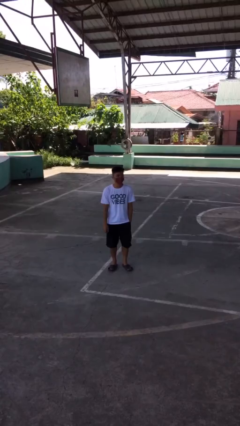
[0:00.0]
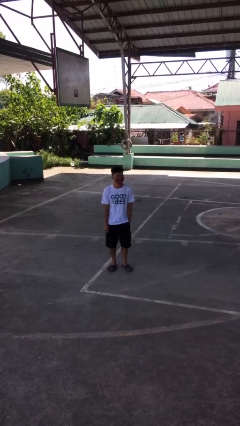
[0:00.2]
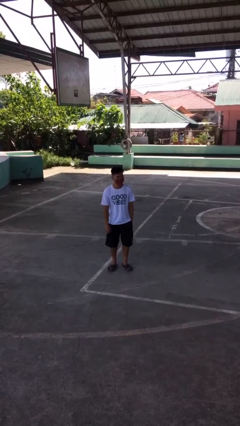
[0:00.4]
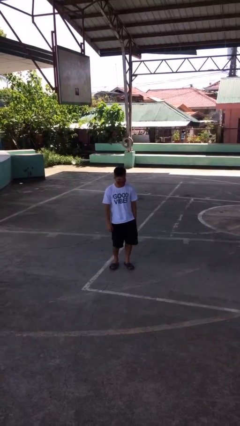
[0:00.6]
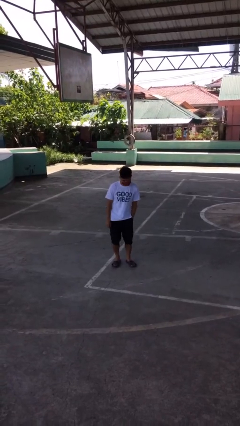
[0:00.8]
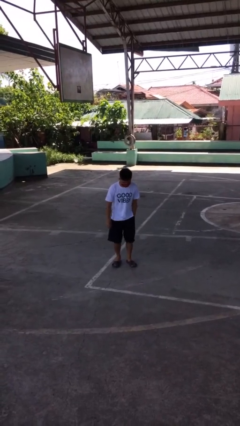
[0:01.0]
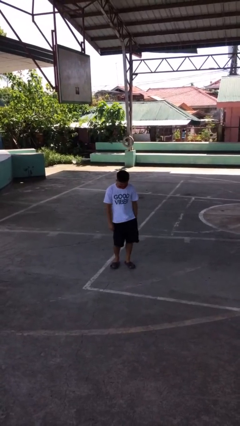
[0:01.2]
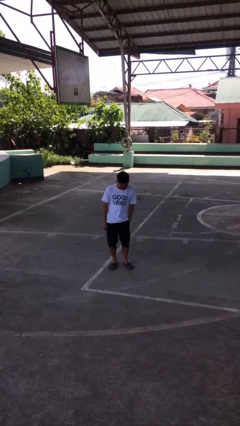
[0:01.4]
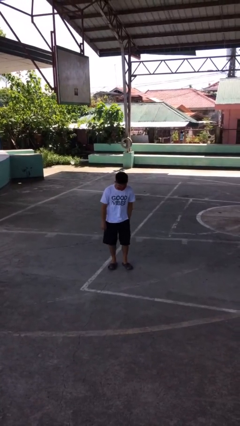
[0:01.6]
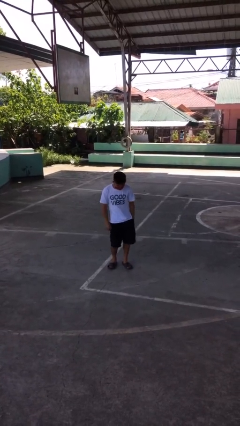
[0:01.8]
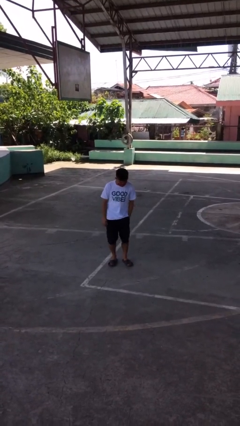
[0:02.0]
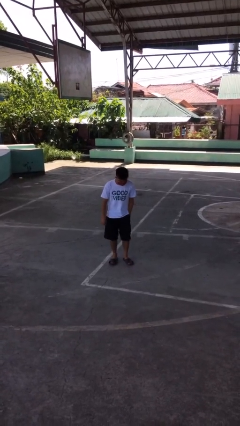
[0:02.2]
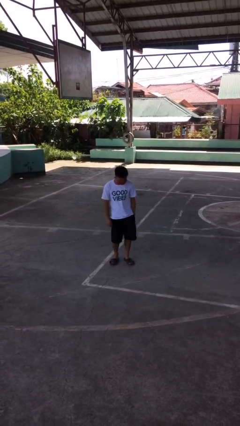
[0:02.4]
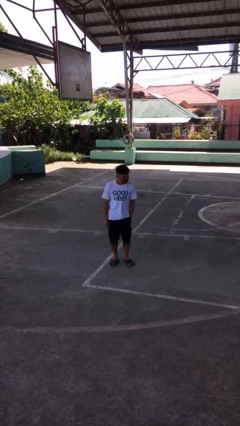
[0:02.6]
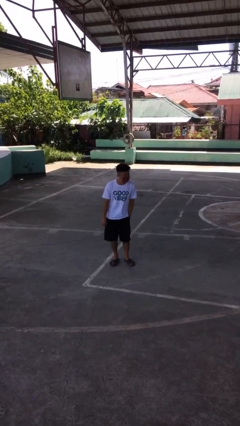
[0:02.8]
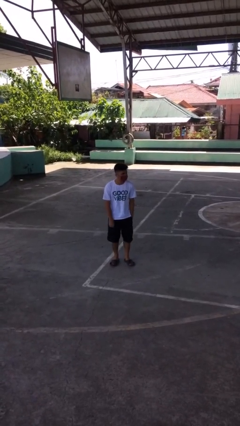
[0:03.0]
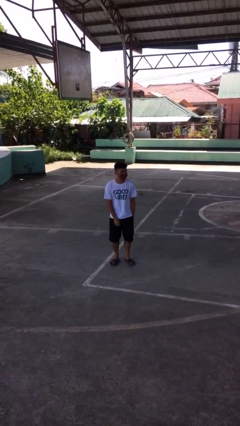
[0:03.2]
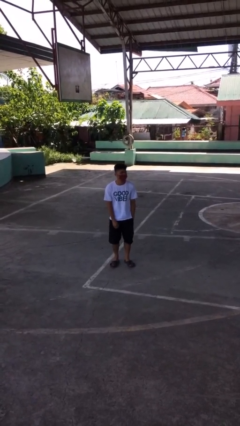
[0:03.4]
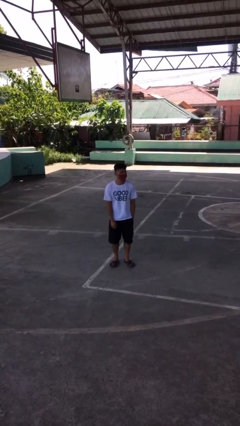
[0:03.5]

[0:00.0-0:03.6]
person wiggles hips

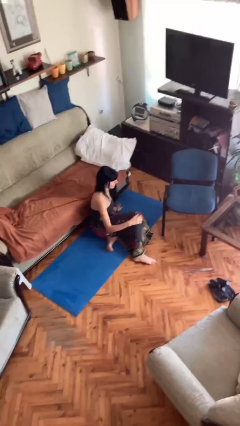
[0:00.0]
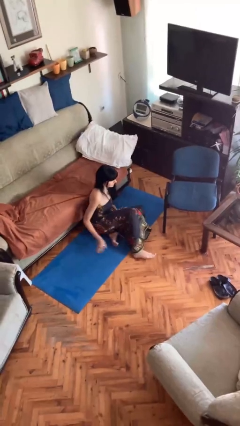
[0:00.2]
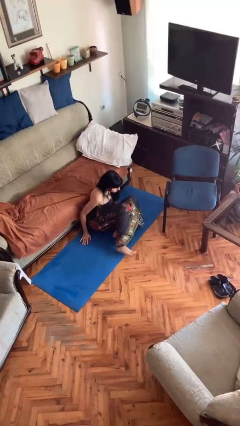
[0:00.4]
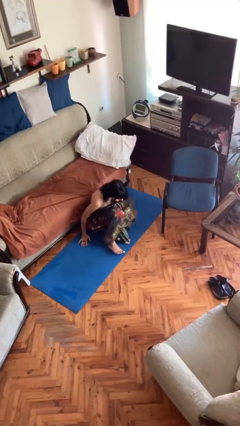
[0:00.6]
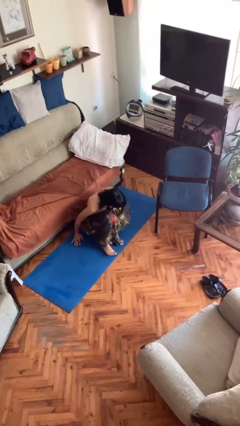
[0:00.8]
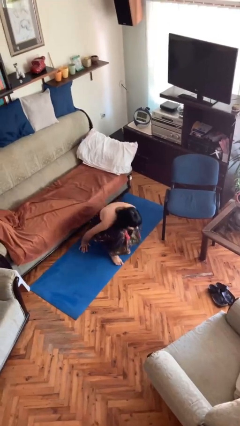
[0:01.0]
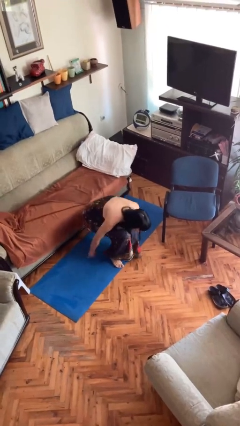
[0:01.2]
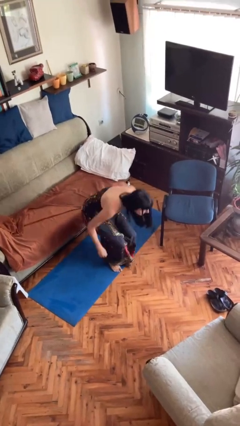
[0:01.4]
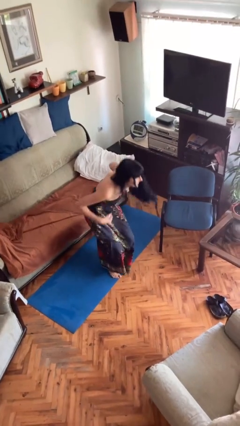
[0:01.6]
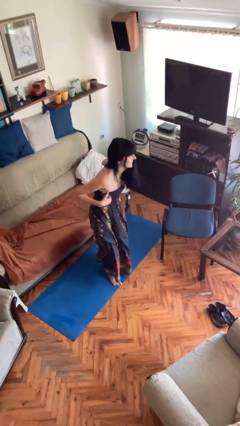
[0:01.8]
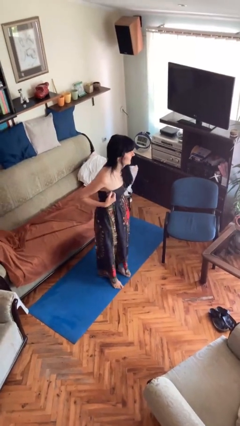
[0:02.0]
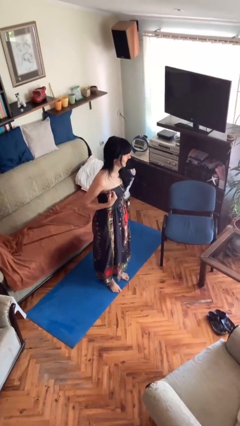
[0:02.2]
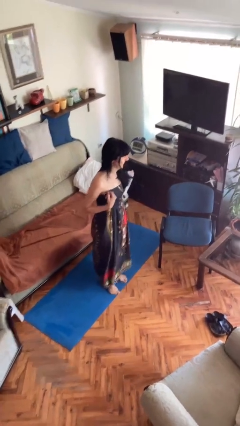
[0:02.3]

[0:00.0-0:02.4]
person stands up from floor

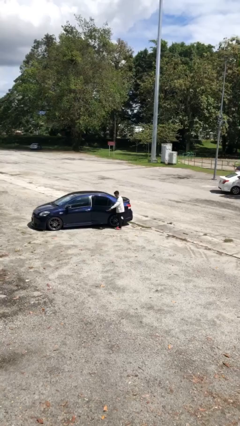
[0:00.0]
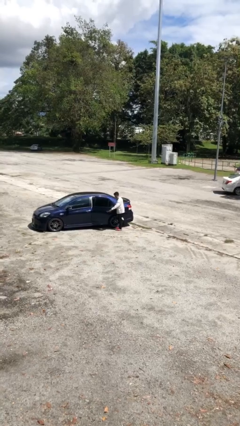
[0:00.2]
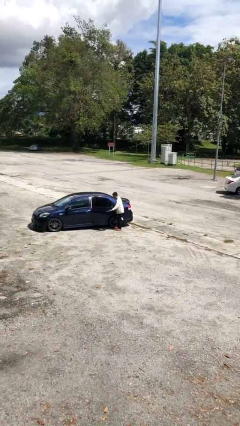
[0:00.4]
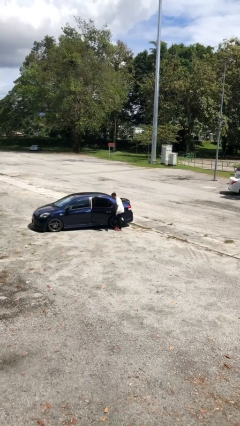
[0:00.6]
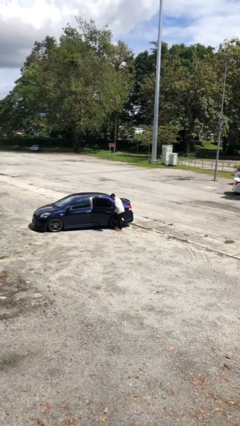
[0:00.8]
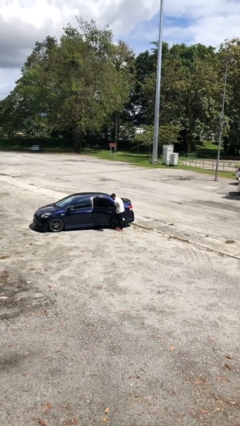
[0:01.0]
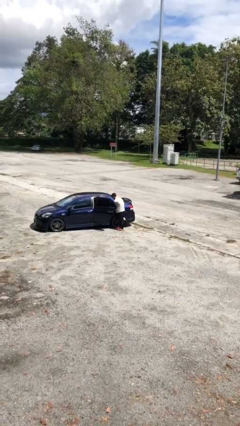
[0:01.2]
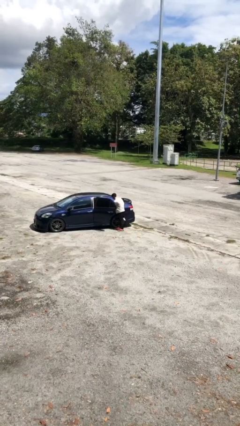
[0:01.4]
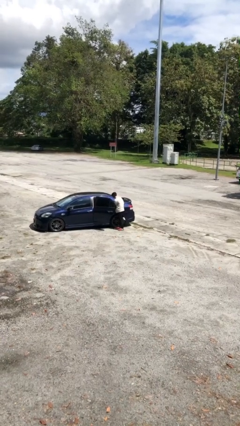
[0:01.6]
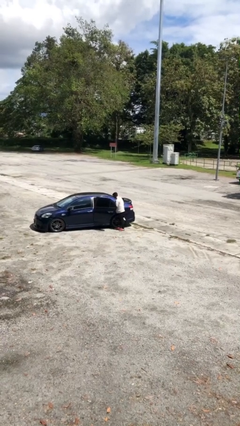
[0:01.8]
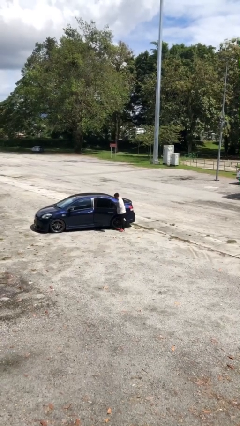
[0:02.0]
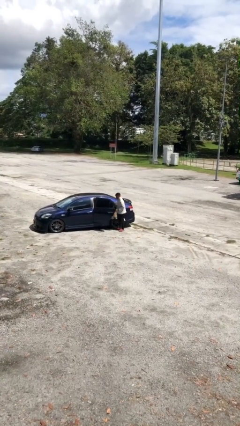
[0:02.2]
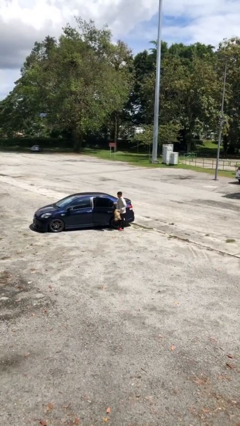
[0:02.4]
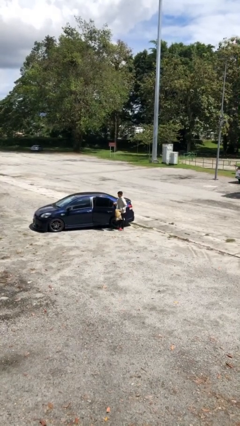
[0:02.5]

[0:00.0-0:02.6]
person unloads car

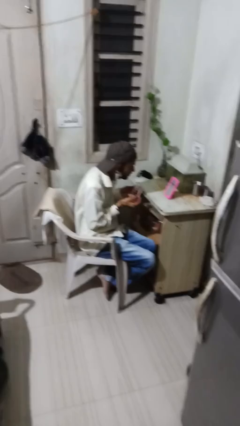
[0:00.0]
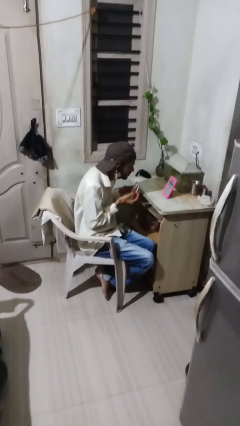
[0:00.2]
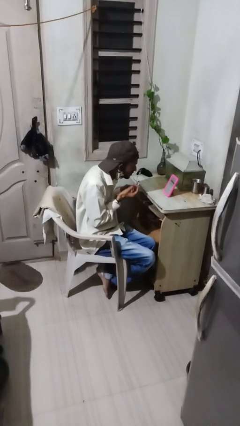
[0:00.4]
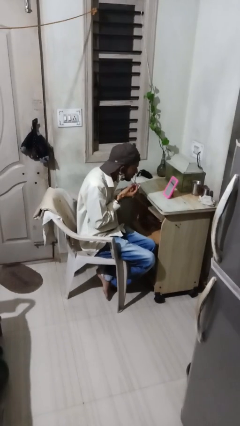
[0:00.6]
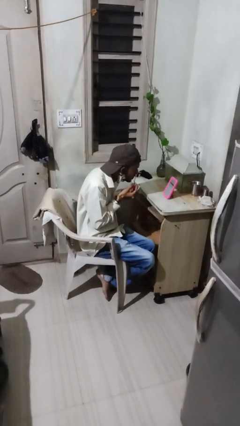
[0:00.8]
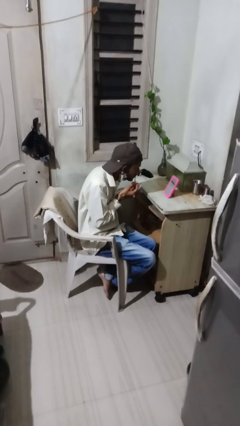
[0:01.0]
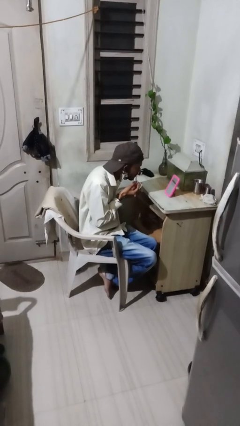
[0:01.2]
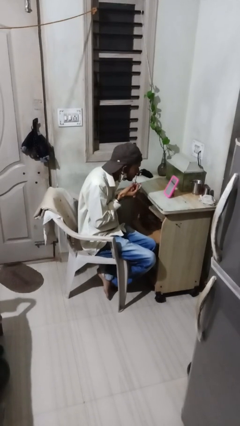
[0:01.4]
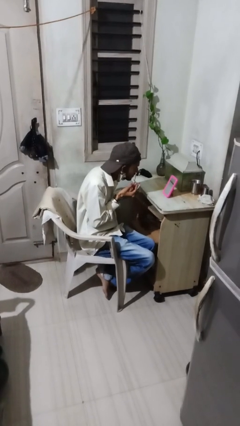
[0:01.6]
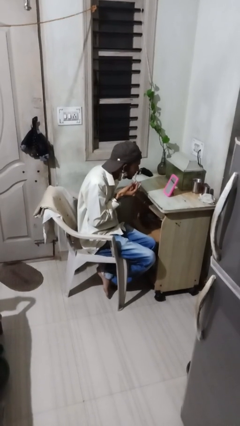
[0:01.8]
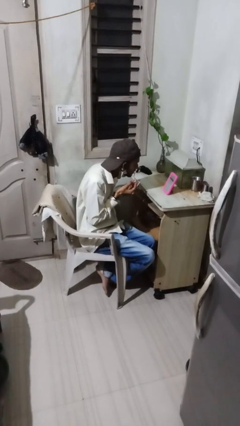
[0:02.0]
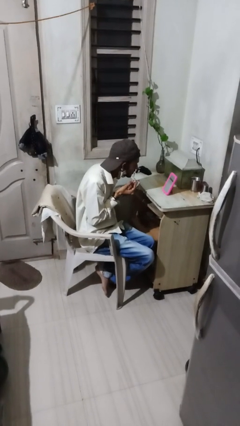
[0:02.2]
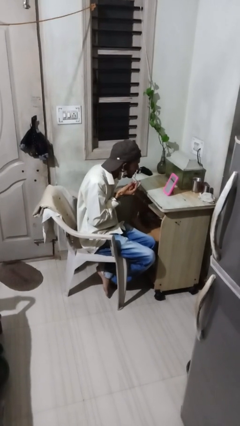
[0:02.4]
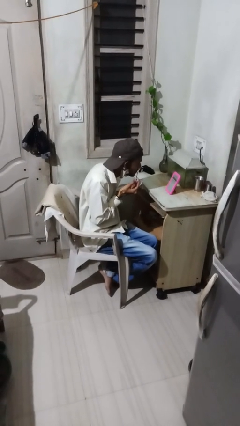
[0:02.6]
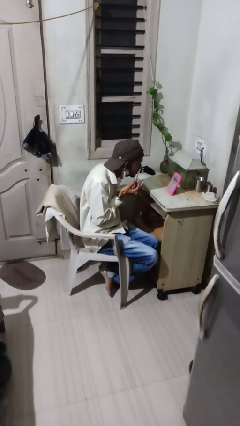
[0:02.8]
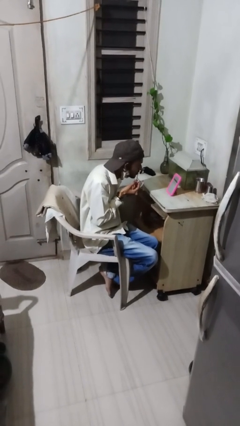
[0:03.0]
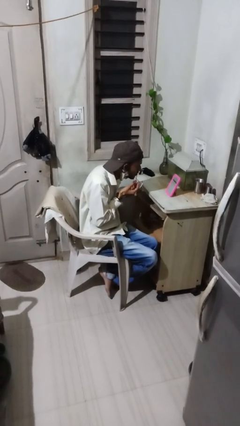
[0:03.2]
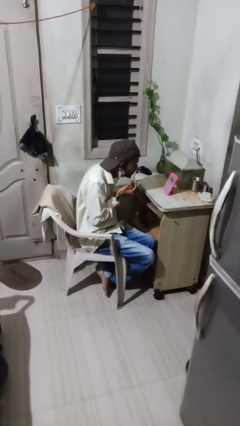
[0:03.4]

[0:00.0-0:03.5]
person applies lip makeup

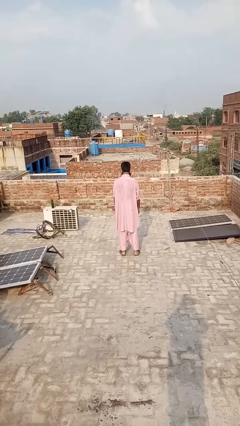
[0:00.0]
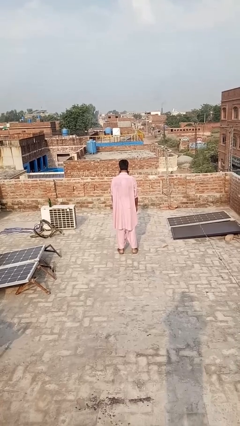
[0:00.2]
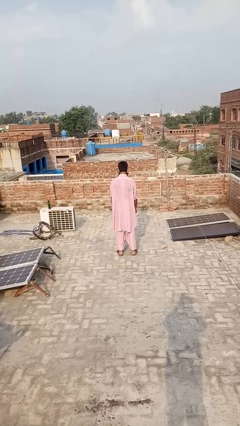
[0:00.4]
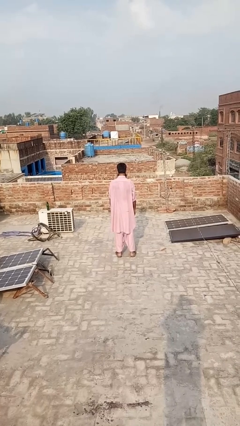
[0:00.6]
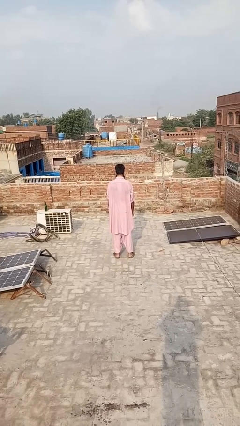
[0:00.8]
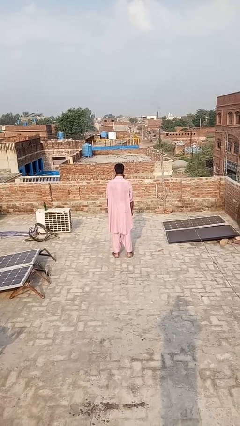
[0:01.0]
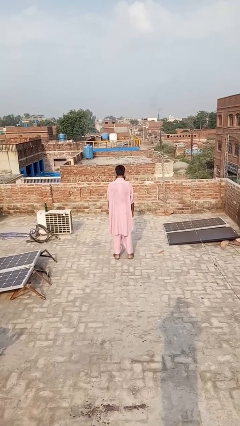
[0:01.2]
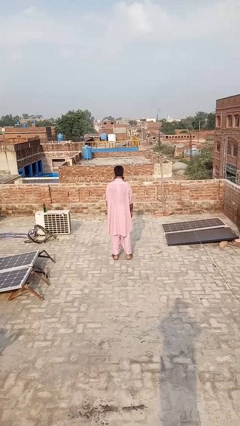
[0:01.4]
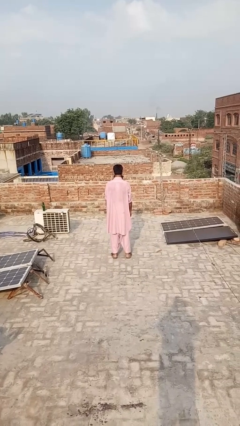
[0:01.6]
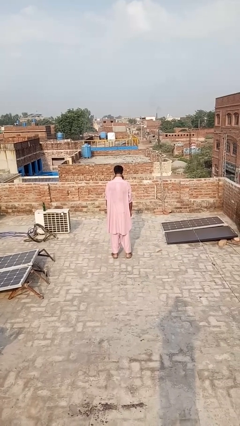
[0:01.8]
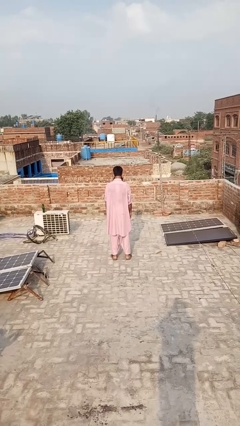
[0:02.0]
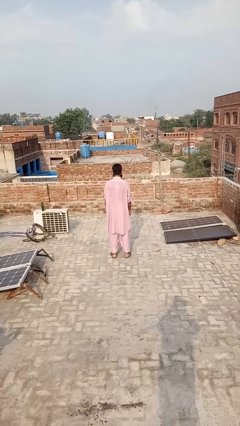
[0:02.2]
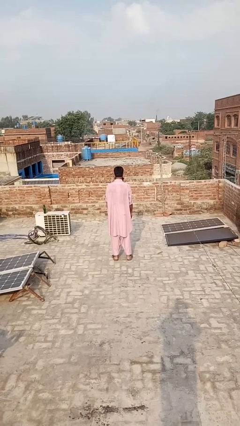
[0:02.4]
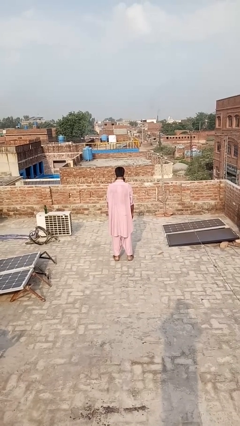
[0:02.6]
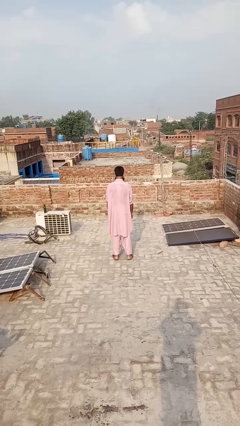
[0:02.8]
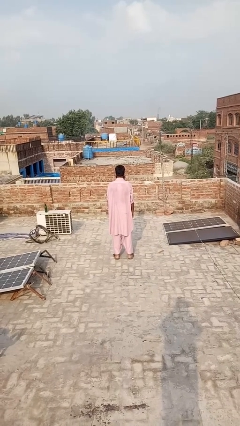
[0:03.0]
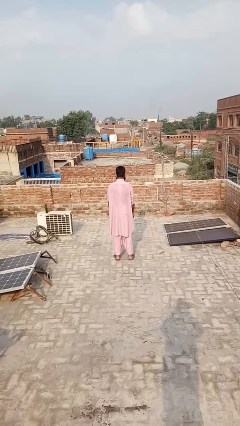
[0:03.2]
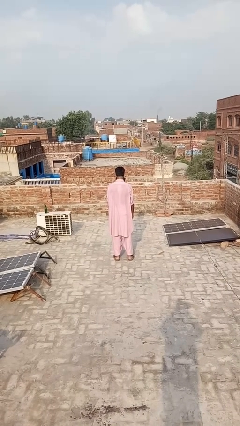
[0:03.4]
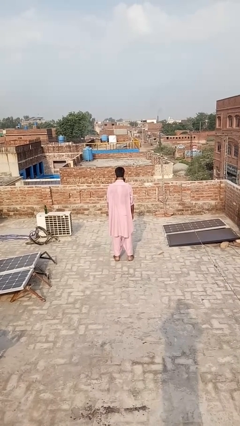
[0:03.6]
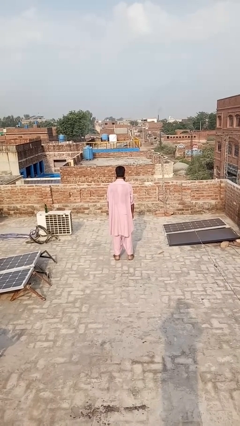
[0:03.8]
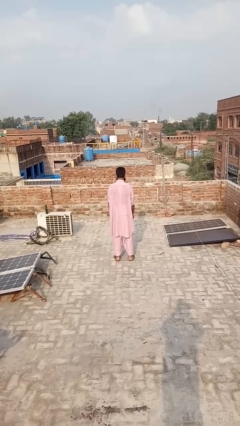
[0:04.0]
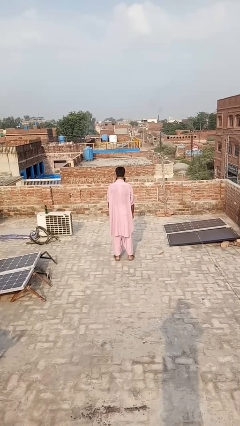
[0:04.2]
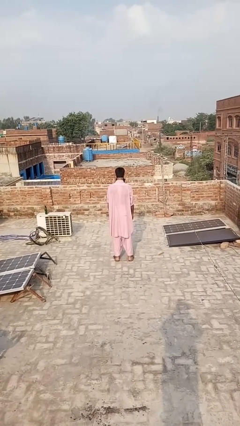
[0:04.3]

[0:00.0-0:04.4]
person nods head

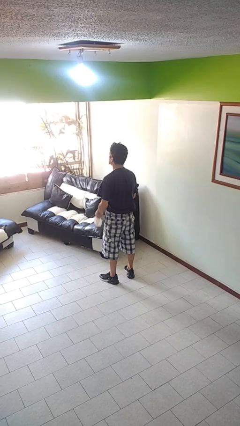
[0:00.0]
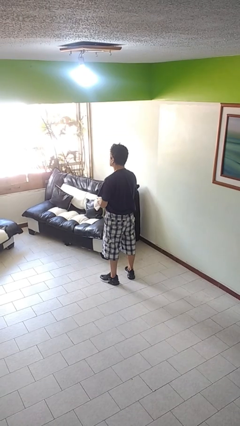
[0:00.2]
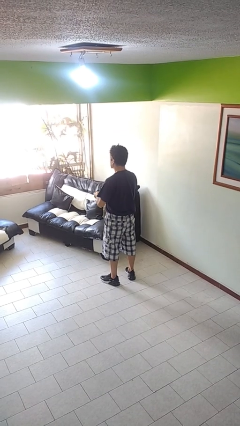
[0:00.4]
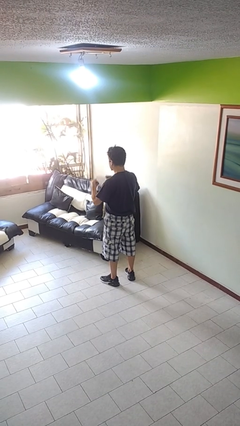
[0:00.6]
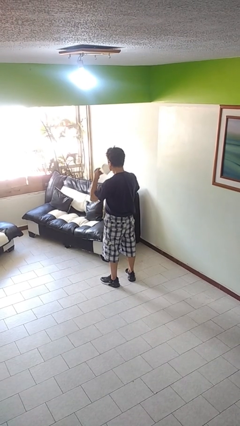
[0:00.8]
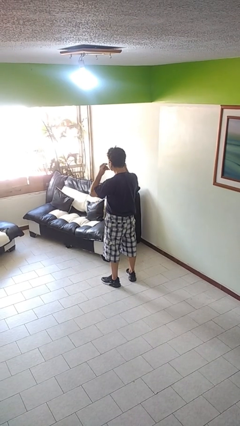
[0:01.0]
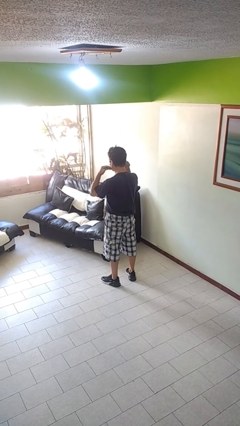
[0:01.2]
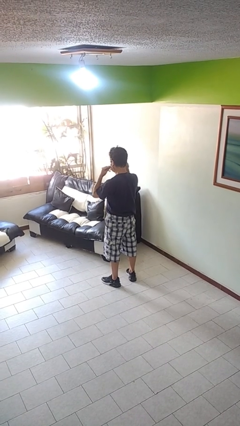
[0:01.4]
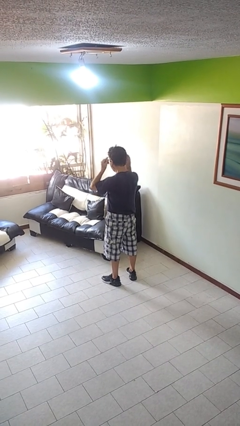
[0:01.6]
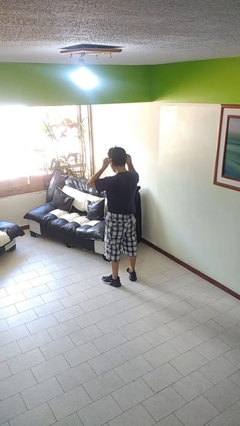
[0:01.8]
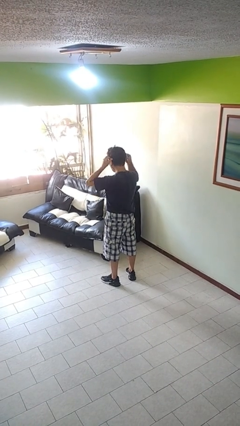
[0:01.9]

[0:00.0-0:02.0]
person puts on facemask
